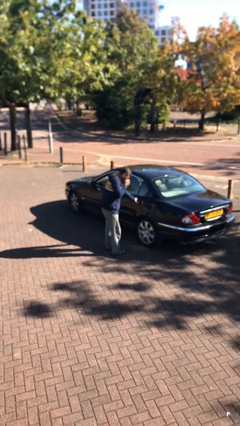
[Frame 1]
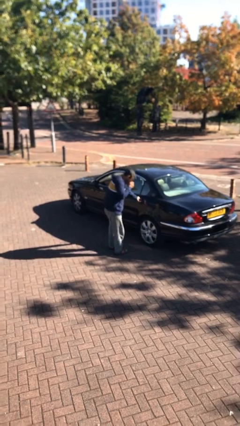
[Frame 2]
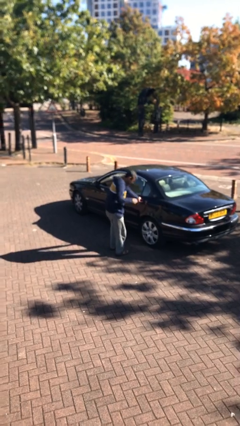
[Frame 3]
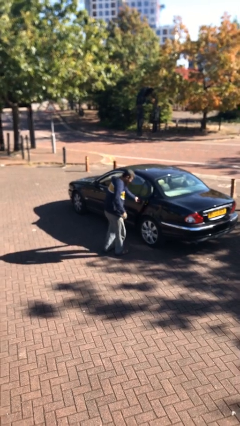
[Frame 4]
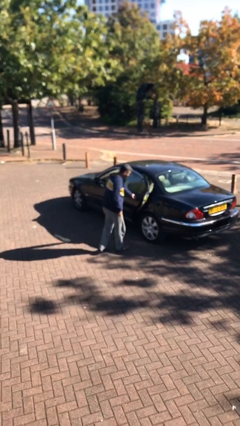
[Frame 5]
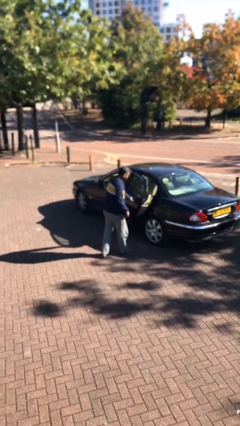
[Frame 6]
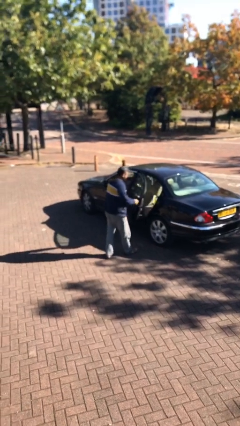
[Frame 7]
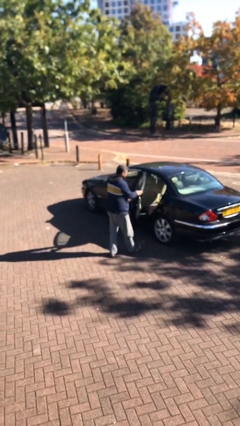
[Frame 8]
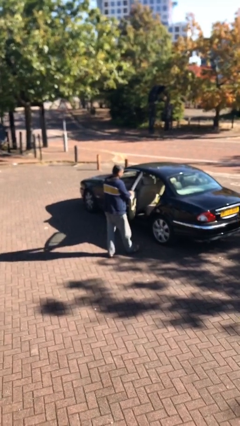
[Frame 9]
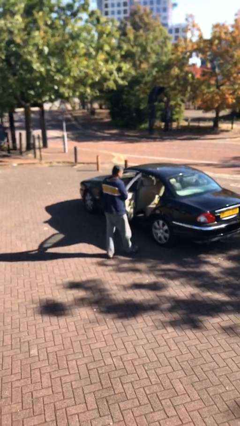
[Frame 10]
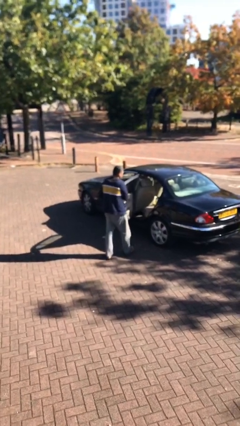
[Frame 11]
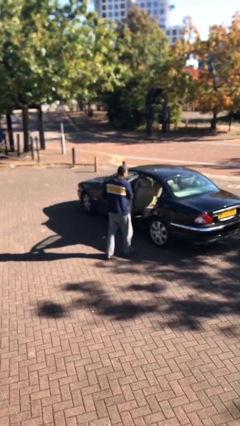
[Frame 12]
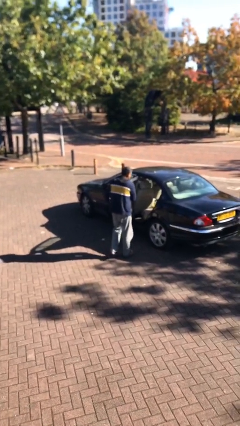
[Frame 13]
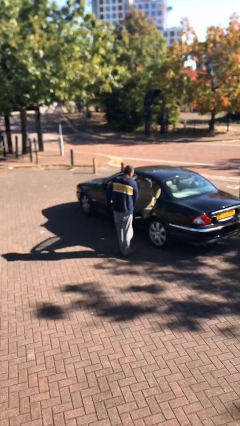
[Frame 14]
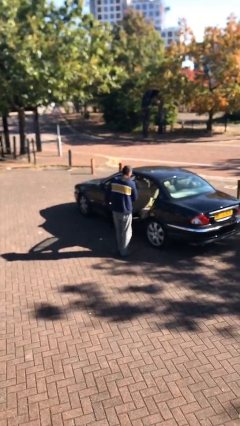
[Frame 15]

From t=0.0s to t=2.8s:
person opens car door

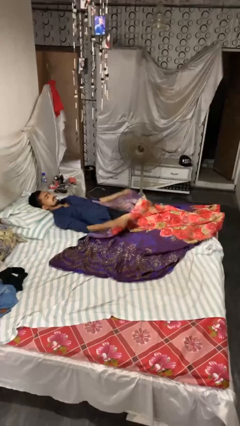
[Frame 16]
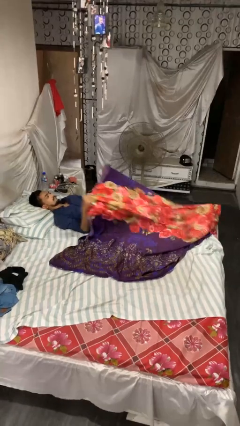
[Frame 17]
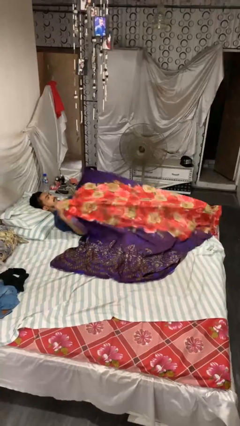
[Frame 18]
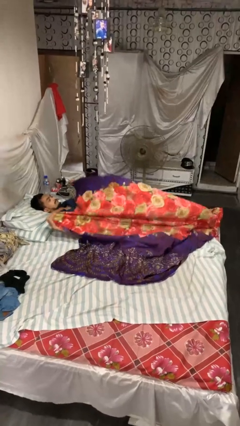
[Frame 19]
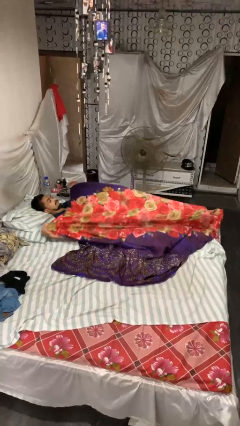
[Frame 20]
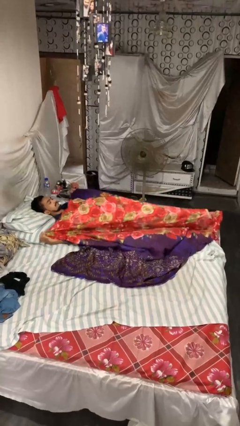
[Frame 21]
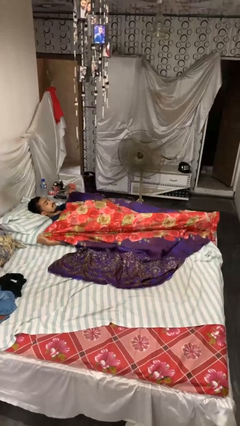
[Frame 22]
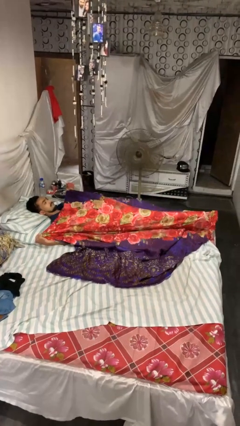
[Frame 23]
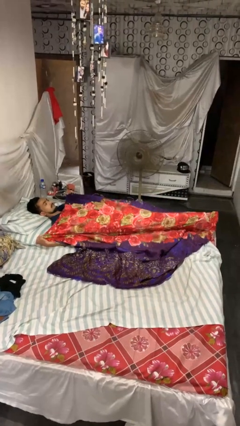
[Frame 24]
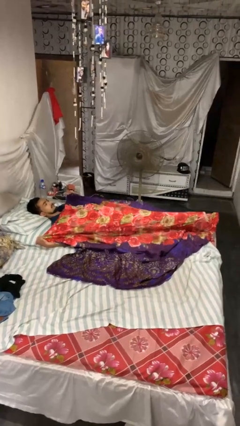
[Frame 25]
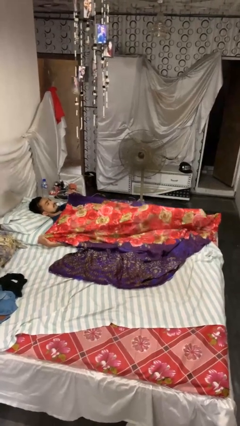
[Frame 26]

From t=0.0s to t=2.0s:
person covers with bedsheets

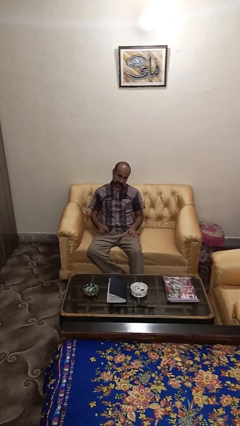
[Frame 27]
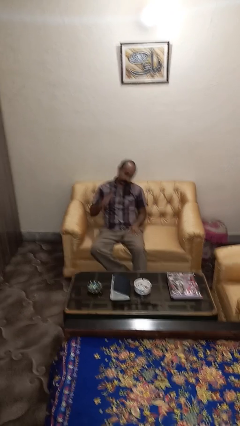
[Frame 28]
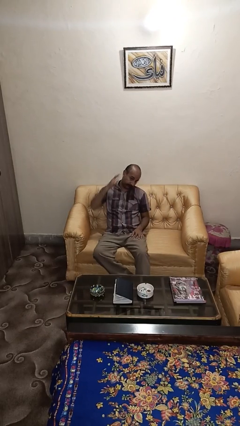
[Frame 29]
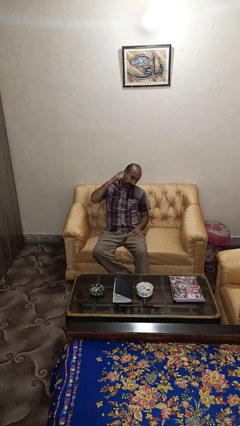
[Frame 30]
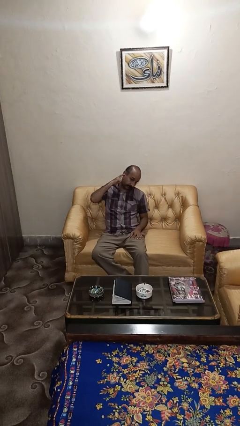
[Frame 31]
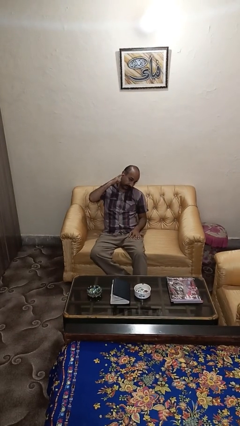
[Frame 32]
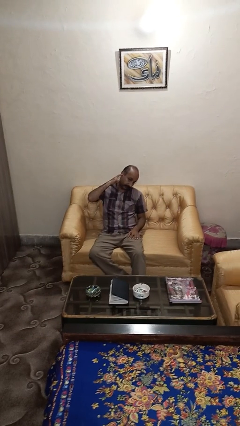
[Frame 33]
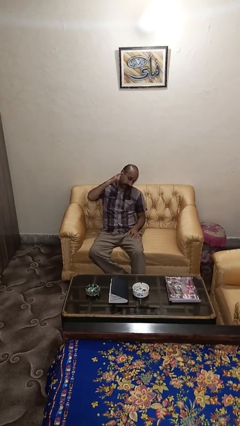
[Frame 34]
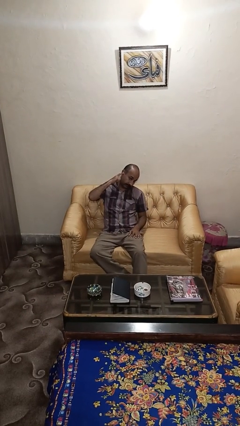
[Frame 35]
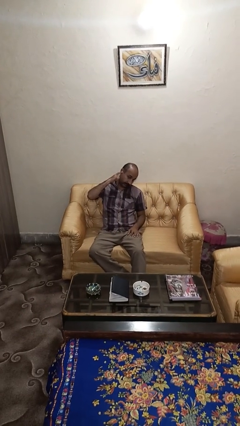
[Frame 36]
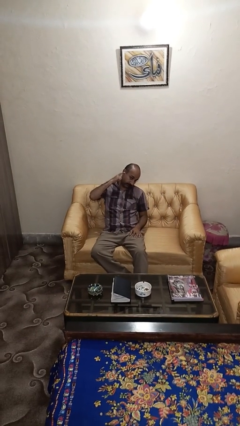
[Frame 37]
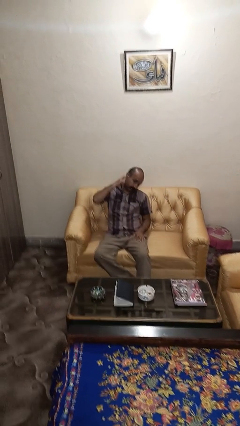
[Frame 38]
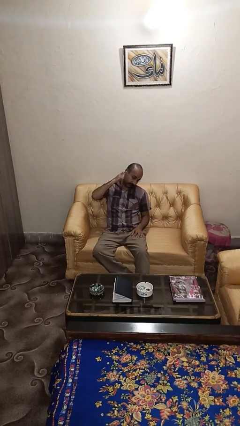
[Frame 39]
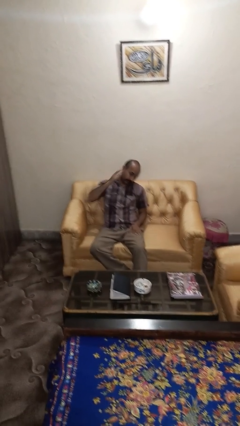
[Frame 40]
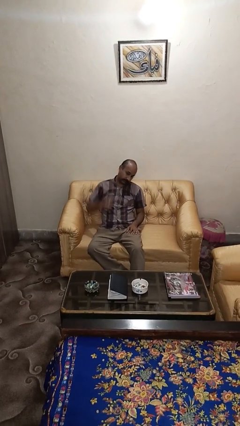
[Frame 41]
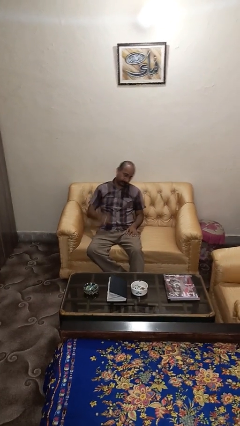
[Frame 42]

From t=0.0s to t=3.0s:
person gestures listen closely

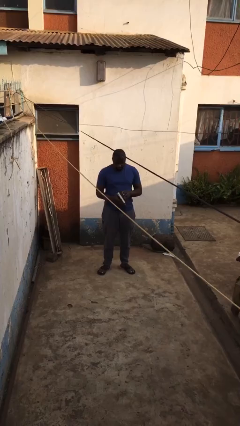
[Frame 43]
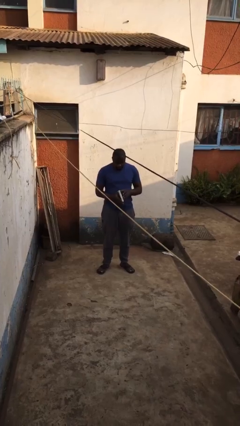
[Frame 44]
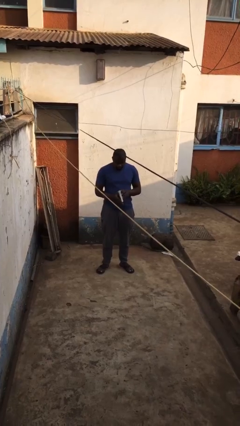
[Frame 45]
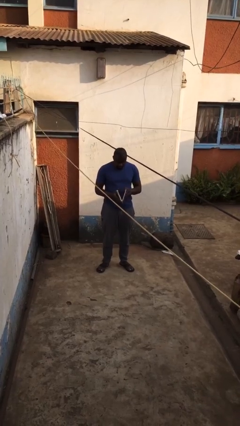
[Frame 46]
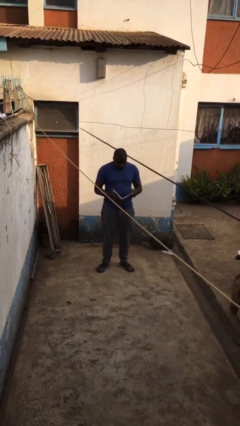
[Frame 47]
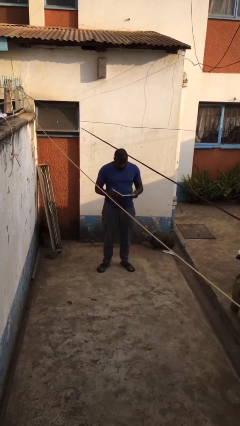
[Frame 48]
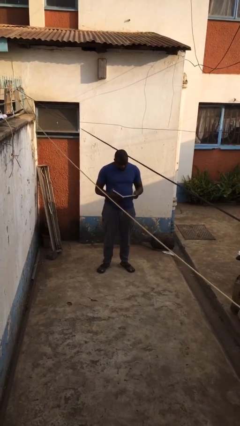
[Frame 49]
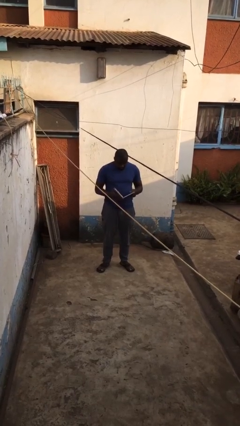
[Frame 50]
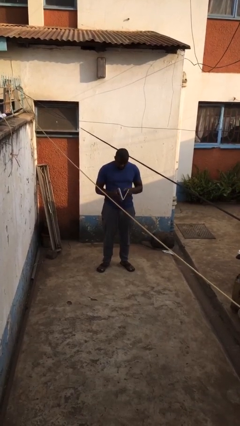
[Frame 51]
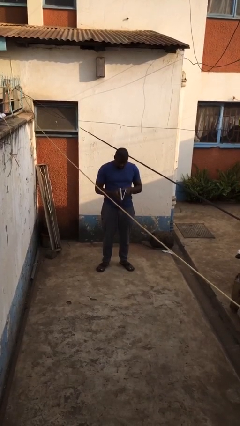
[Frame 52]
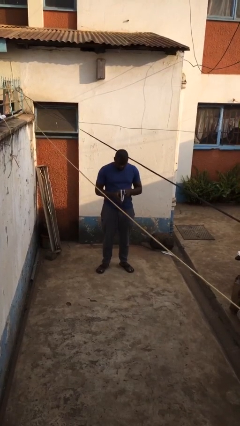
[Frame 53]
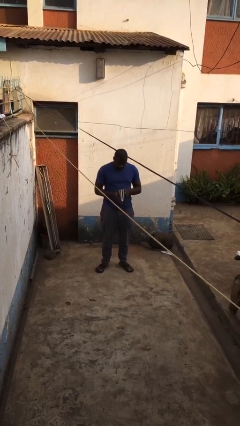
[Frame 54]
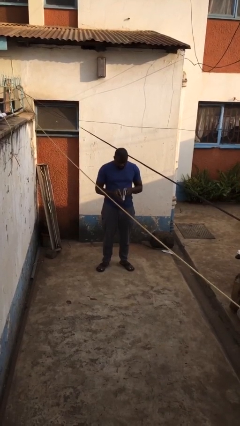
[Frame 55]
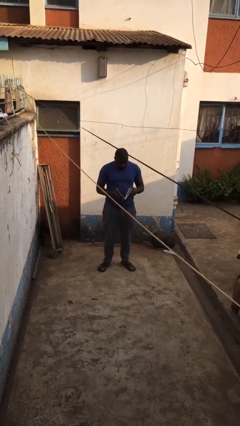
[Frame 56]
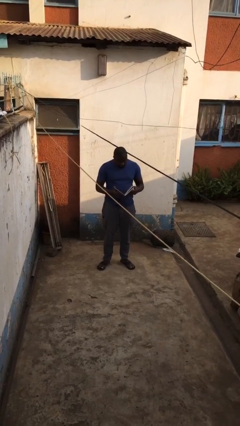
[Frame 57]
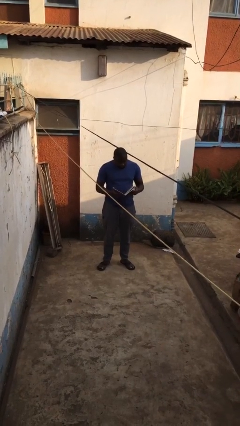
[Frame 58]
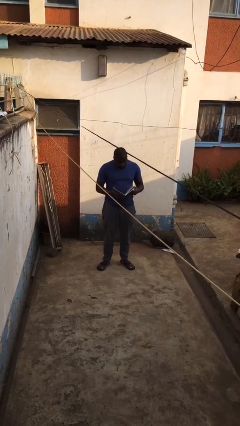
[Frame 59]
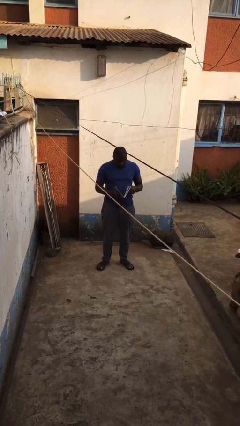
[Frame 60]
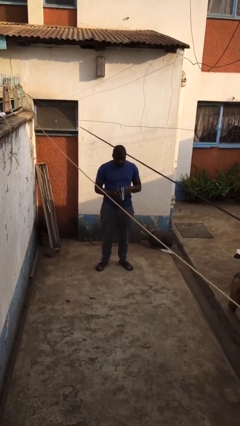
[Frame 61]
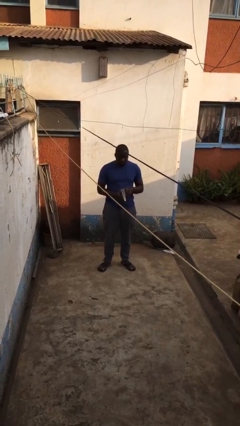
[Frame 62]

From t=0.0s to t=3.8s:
person reads book

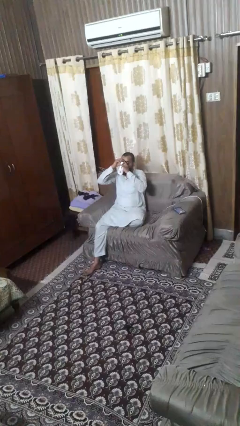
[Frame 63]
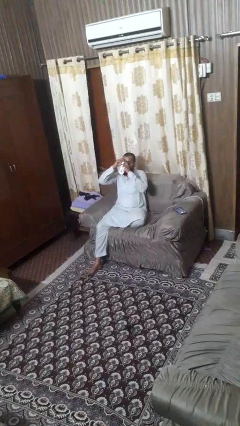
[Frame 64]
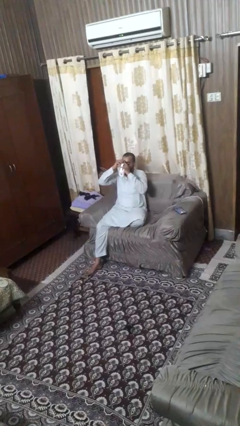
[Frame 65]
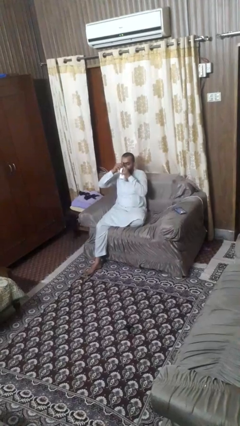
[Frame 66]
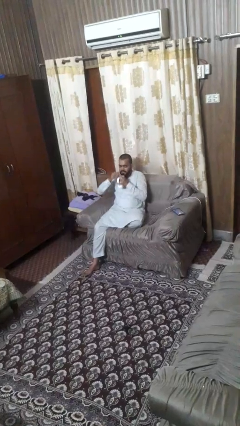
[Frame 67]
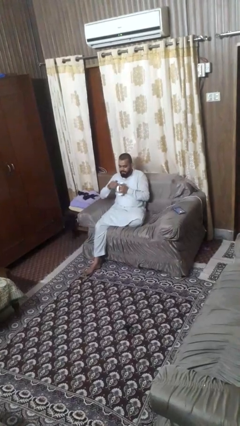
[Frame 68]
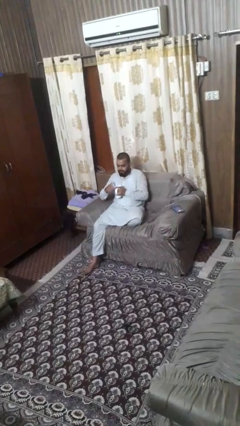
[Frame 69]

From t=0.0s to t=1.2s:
person drinks from mug

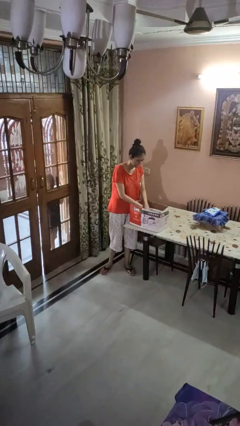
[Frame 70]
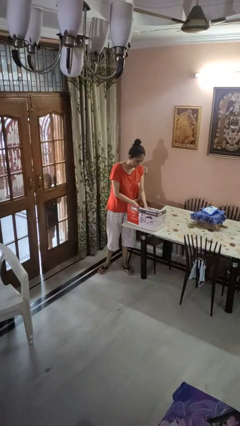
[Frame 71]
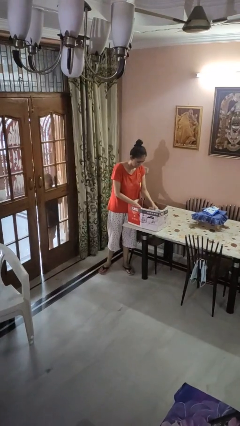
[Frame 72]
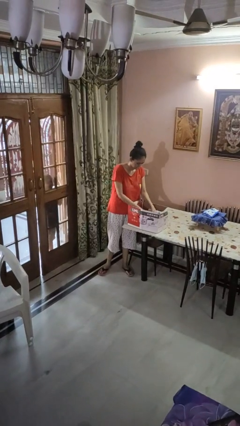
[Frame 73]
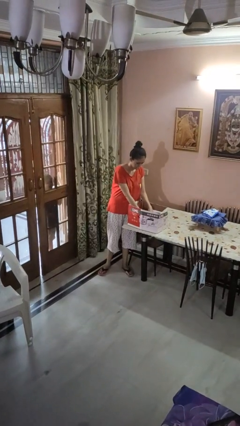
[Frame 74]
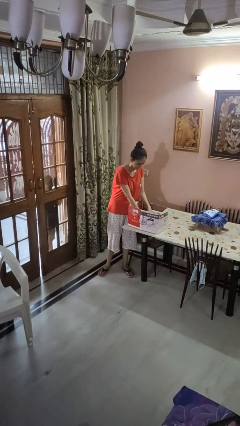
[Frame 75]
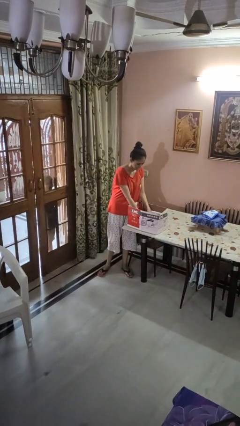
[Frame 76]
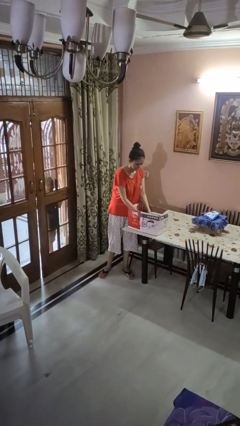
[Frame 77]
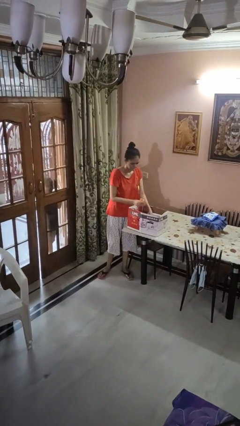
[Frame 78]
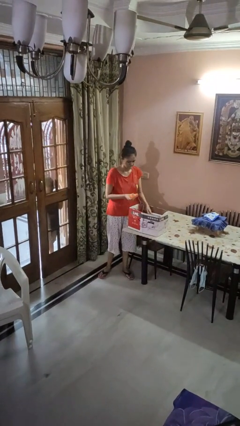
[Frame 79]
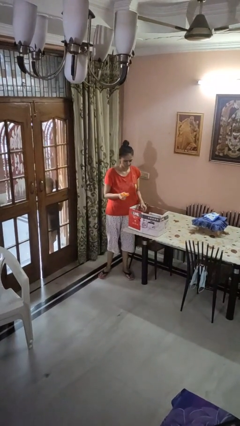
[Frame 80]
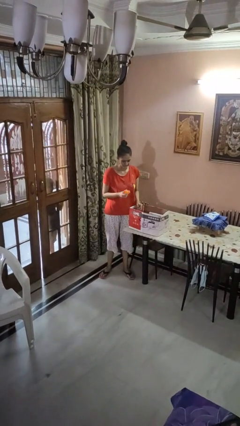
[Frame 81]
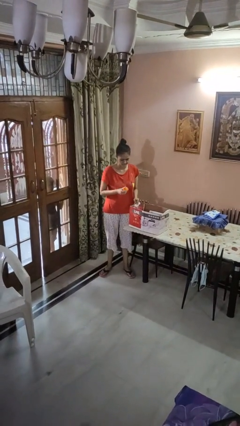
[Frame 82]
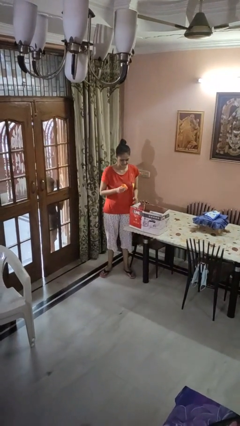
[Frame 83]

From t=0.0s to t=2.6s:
person takes object from box

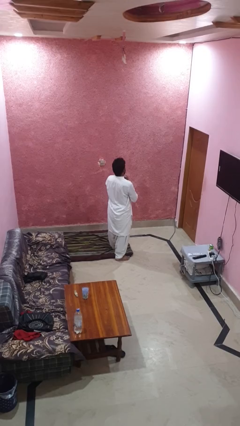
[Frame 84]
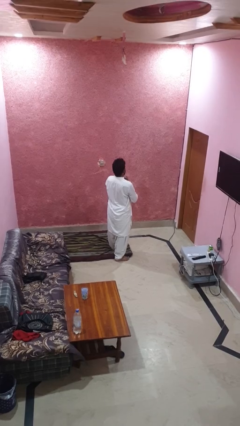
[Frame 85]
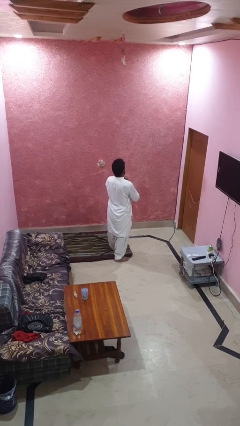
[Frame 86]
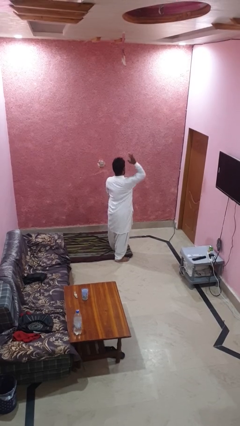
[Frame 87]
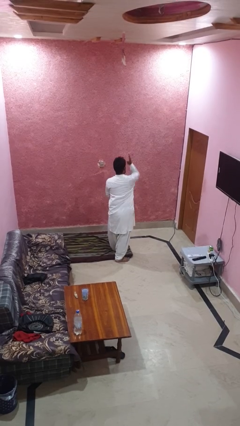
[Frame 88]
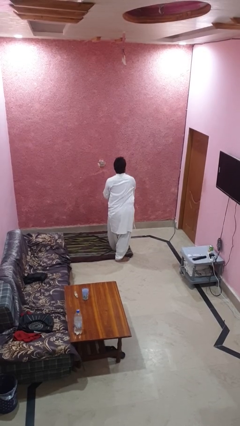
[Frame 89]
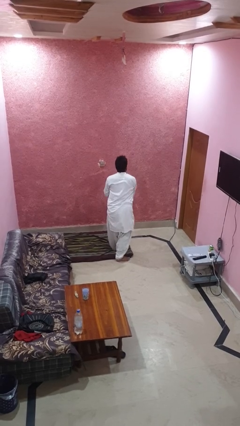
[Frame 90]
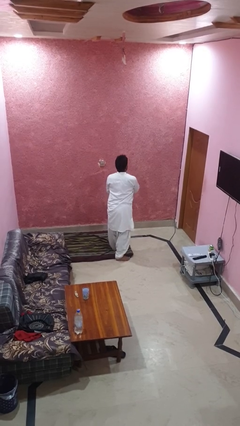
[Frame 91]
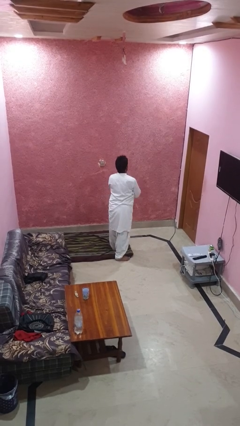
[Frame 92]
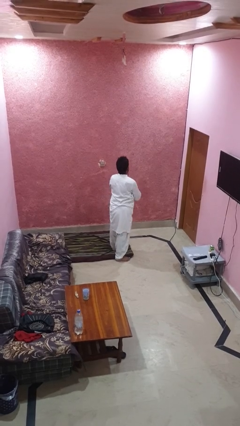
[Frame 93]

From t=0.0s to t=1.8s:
person karate chop
